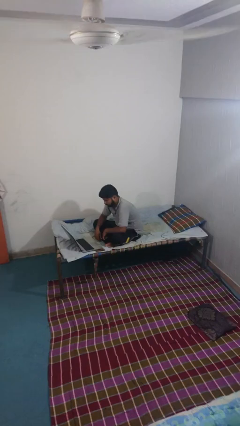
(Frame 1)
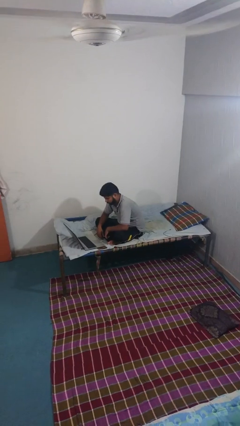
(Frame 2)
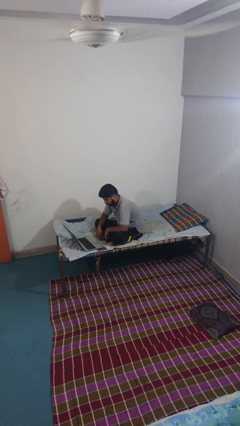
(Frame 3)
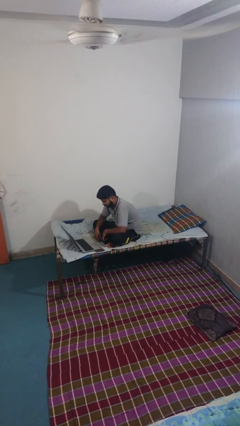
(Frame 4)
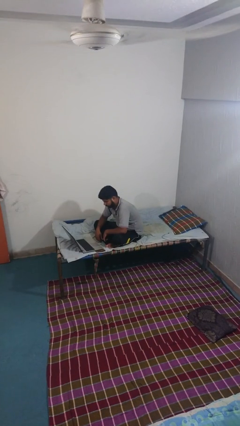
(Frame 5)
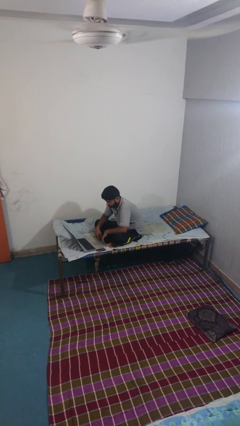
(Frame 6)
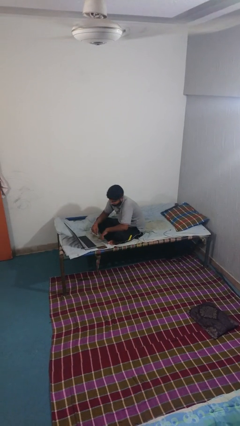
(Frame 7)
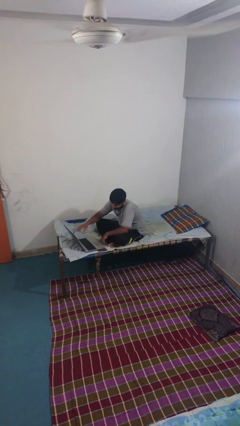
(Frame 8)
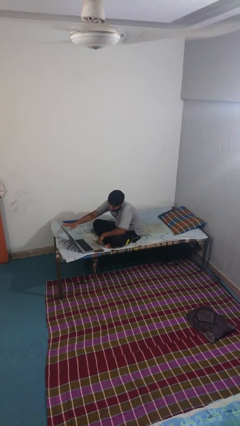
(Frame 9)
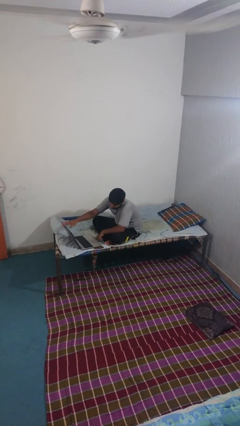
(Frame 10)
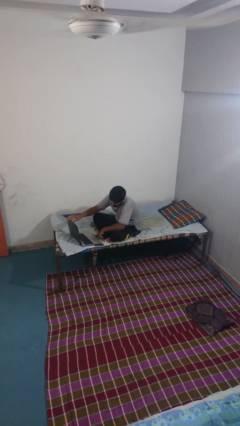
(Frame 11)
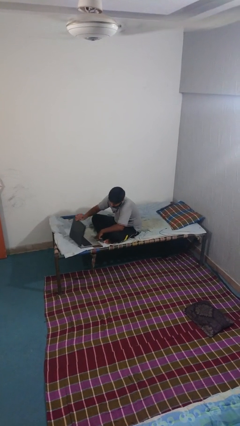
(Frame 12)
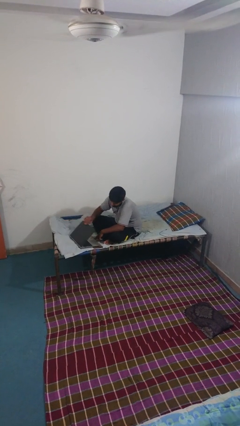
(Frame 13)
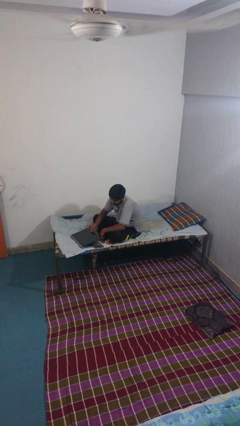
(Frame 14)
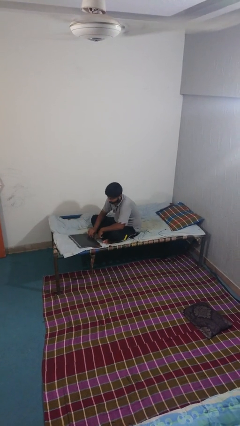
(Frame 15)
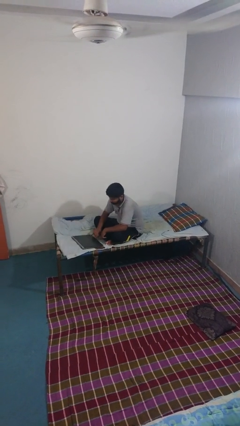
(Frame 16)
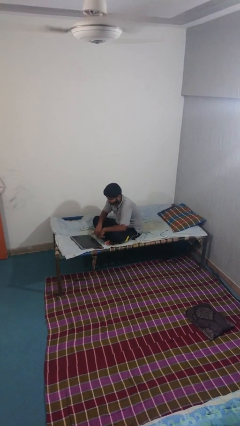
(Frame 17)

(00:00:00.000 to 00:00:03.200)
person closes laptop

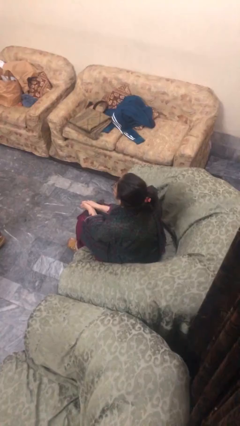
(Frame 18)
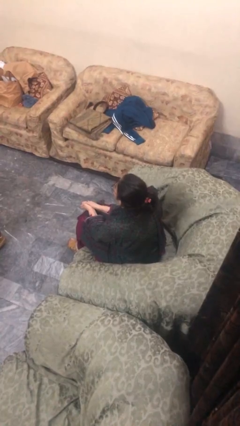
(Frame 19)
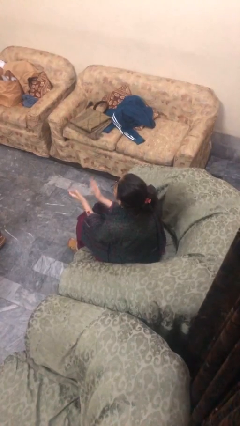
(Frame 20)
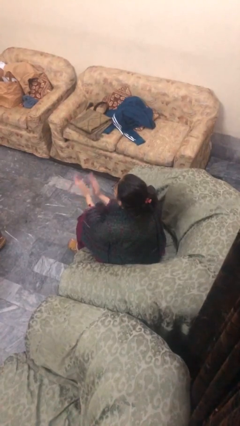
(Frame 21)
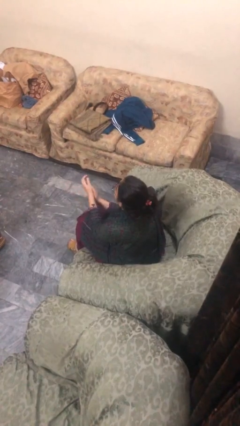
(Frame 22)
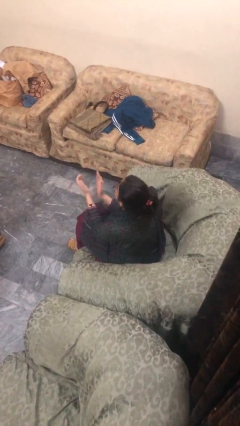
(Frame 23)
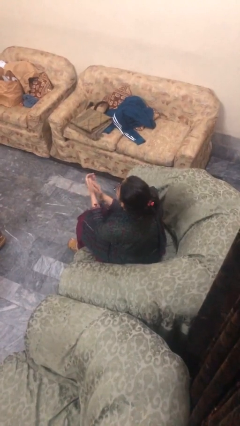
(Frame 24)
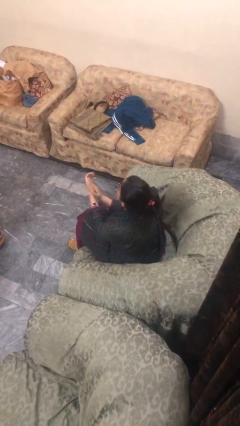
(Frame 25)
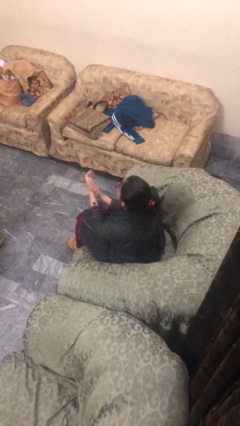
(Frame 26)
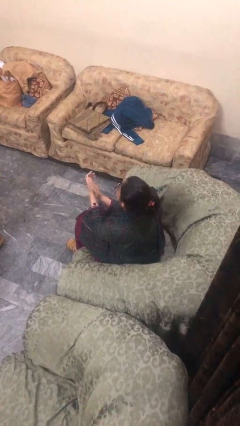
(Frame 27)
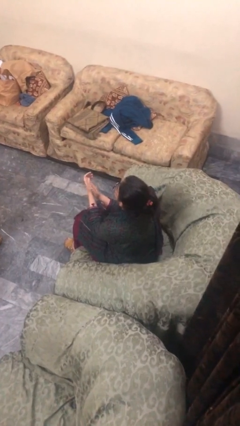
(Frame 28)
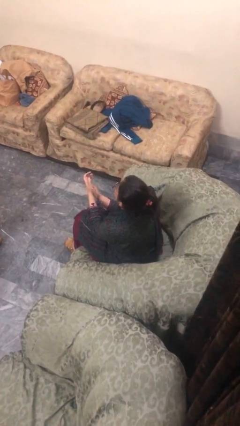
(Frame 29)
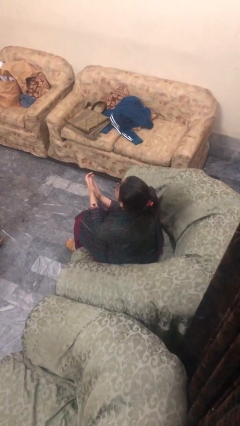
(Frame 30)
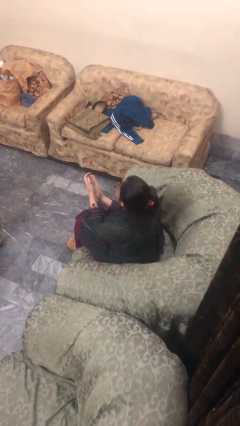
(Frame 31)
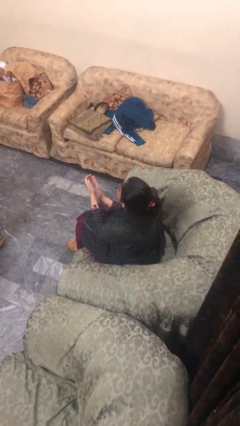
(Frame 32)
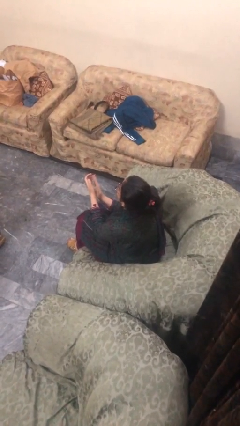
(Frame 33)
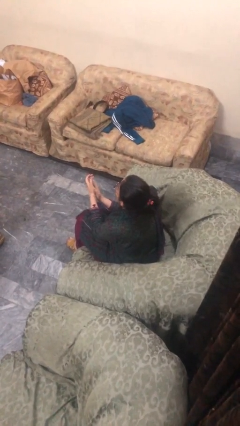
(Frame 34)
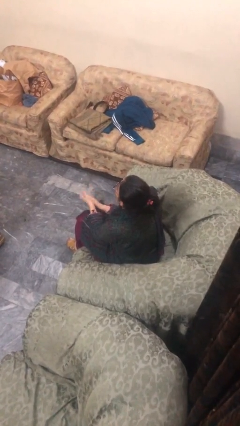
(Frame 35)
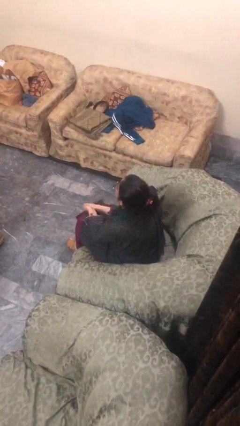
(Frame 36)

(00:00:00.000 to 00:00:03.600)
person claps hands

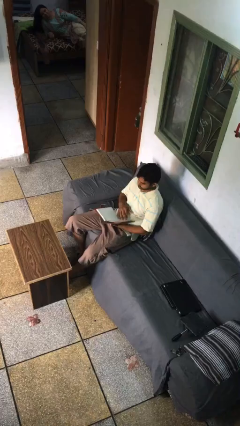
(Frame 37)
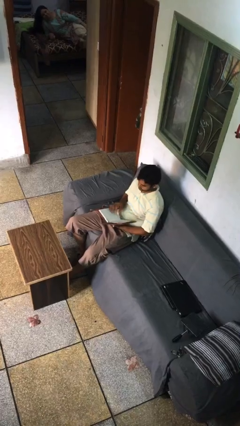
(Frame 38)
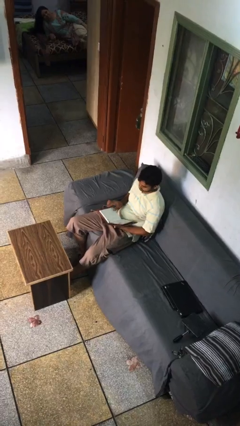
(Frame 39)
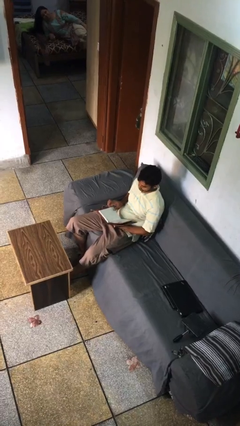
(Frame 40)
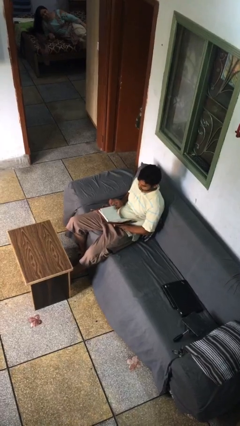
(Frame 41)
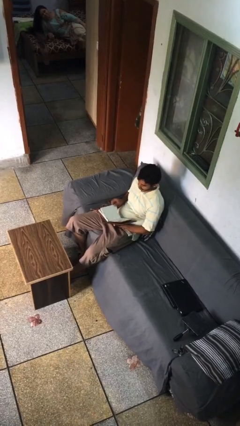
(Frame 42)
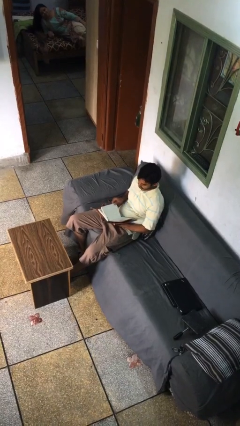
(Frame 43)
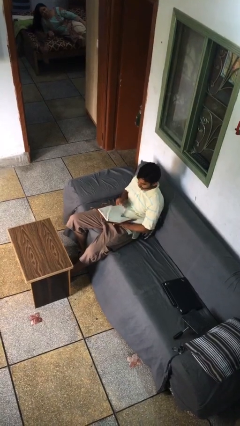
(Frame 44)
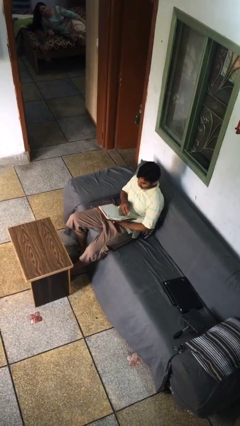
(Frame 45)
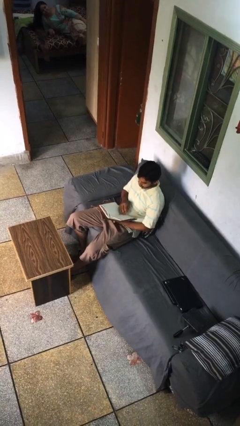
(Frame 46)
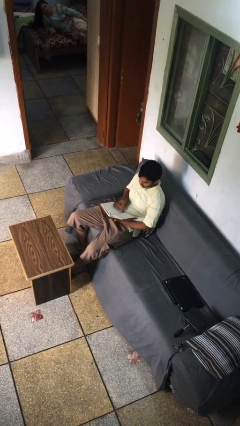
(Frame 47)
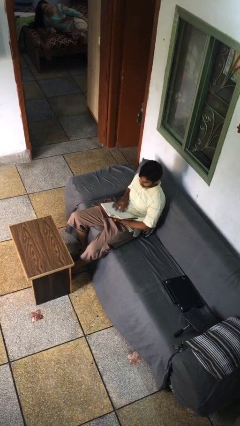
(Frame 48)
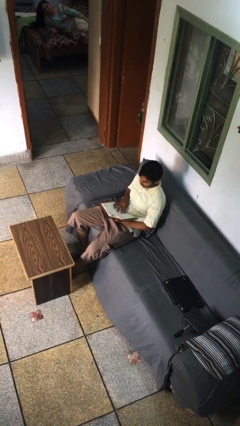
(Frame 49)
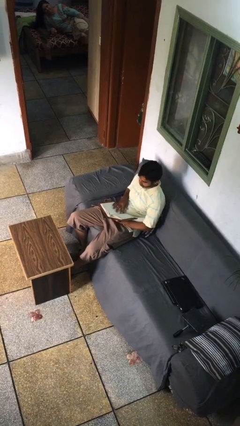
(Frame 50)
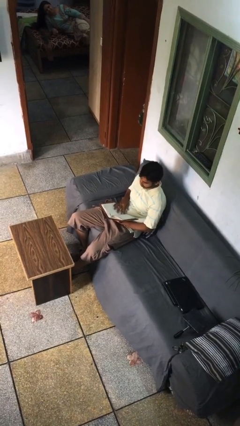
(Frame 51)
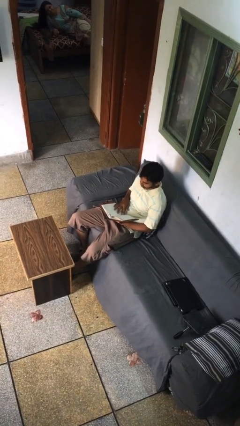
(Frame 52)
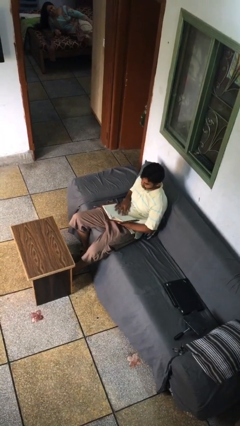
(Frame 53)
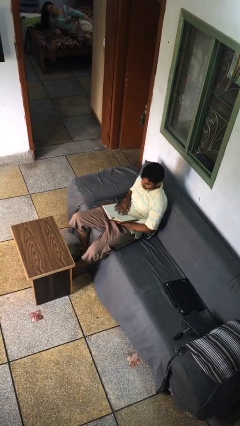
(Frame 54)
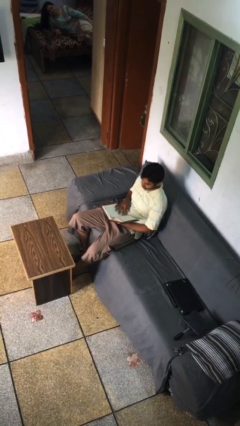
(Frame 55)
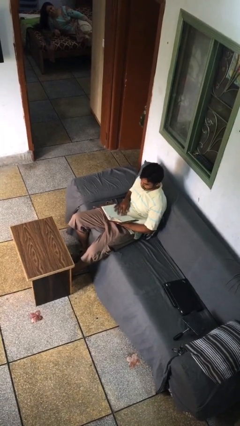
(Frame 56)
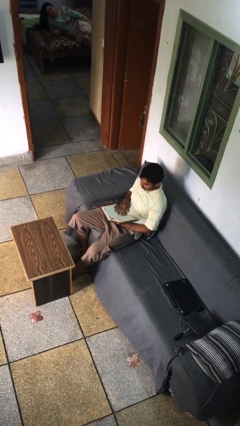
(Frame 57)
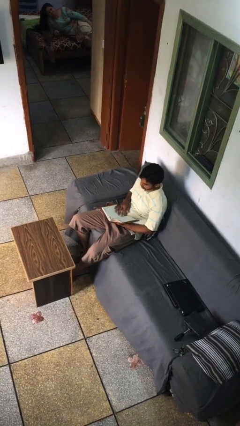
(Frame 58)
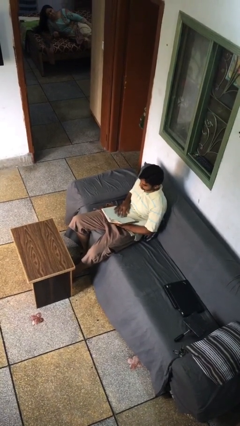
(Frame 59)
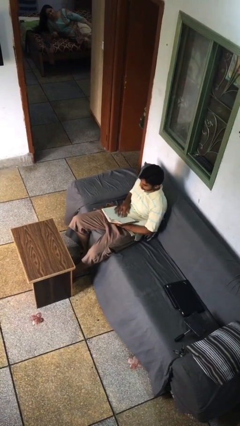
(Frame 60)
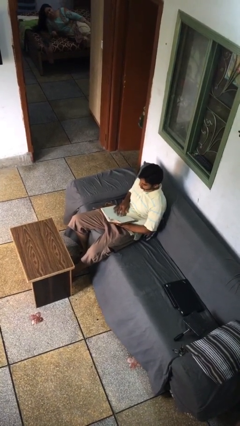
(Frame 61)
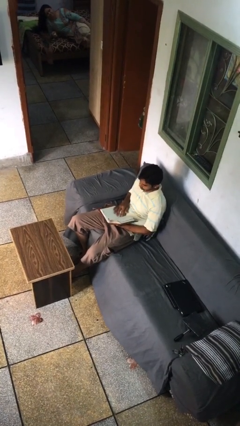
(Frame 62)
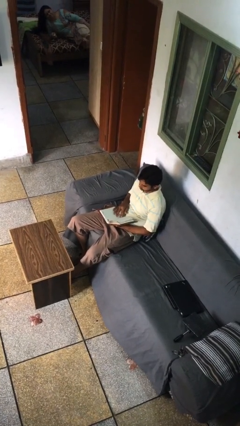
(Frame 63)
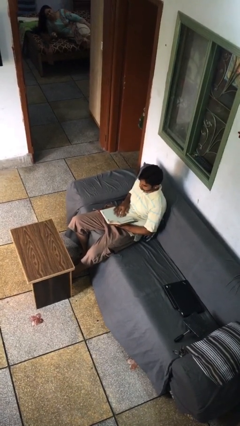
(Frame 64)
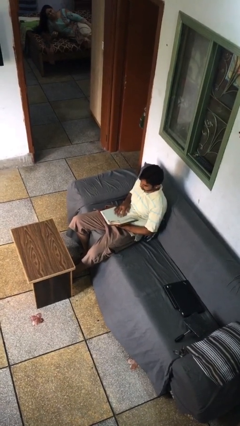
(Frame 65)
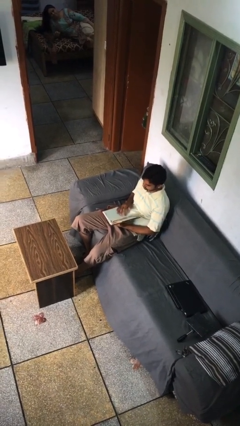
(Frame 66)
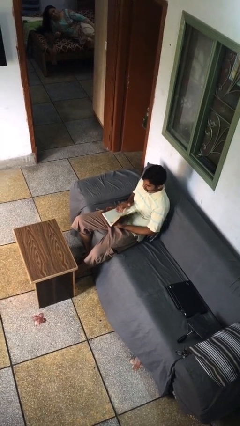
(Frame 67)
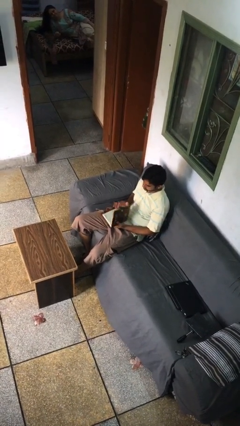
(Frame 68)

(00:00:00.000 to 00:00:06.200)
person reads document

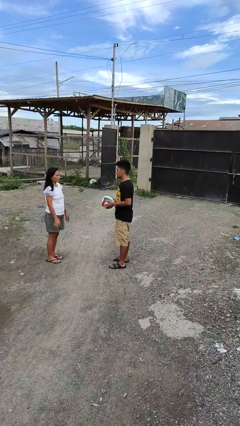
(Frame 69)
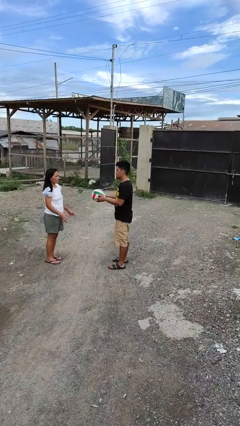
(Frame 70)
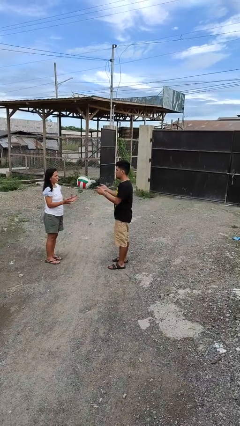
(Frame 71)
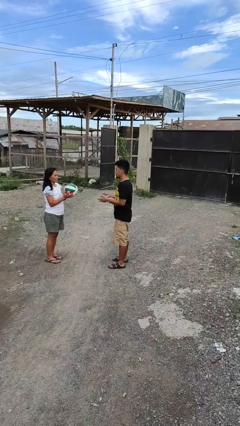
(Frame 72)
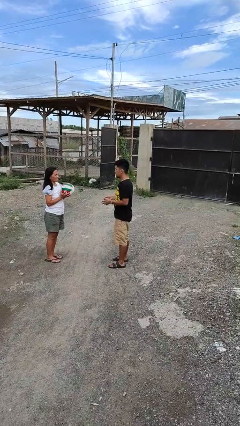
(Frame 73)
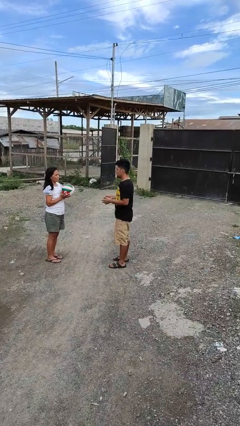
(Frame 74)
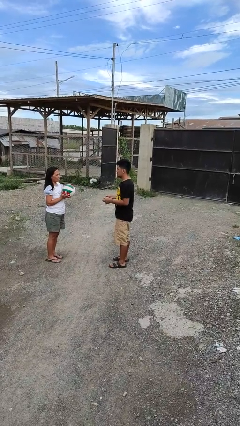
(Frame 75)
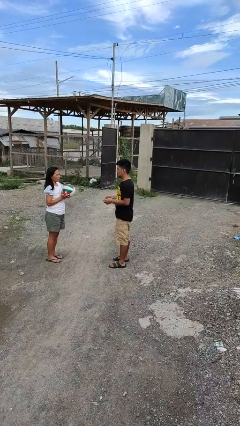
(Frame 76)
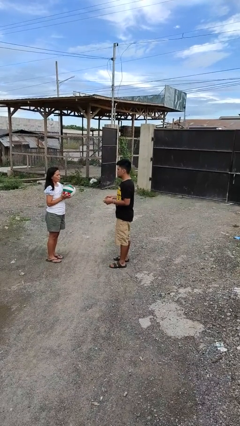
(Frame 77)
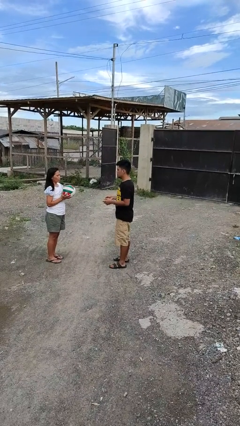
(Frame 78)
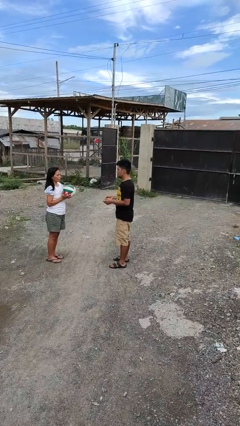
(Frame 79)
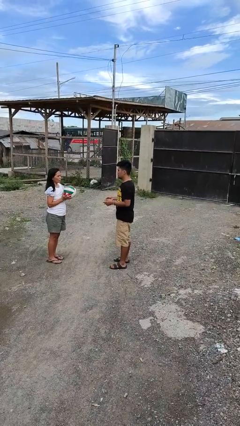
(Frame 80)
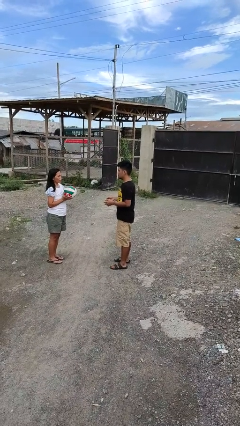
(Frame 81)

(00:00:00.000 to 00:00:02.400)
person throws object to person

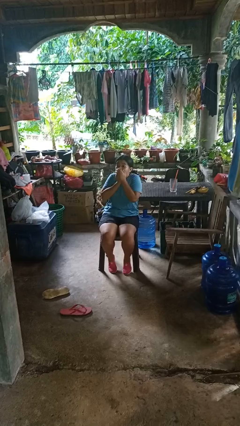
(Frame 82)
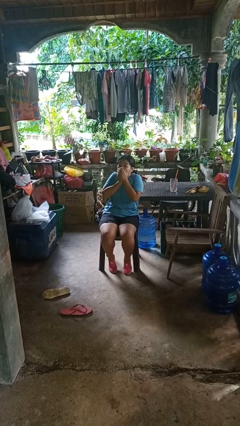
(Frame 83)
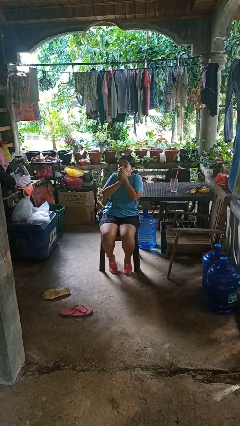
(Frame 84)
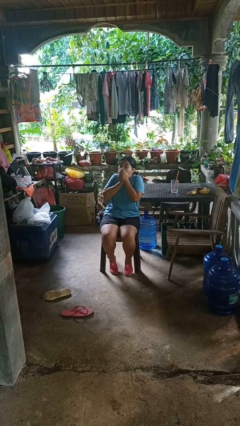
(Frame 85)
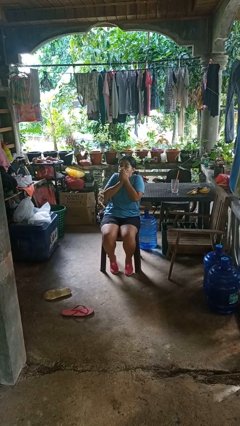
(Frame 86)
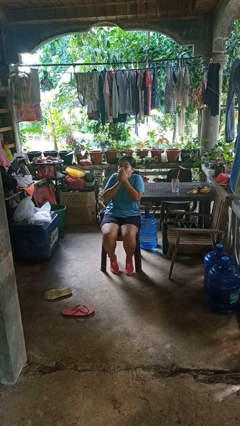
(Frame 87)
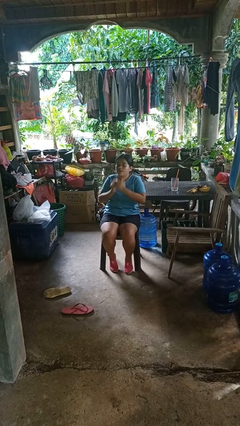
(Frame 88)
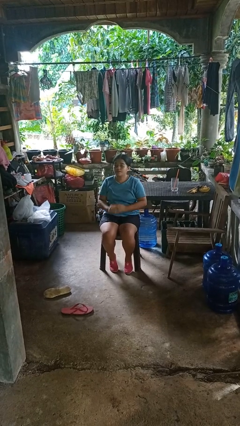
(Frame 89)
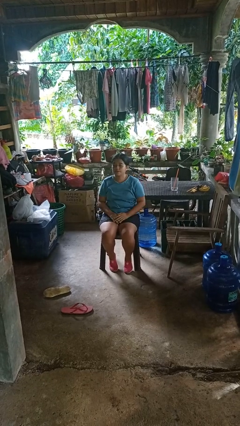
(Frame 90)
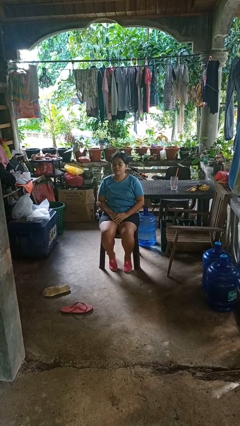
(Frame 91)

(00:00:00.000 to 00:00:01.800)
person covers face with hands

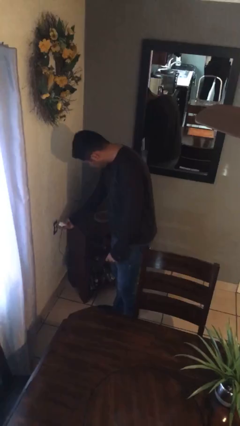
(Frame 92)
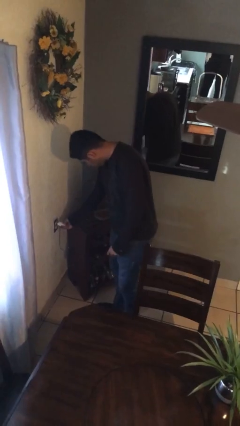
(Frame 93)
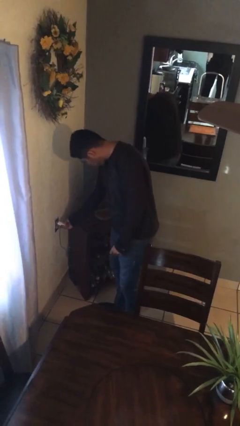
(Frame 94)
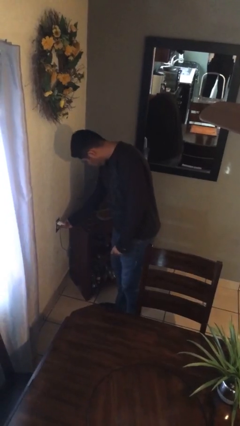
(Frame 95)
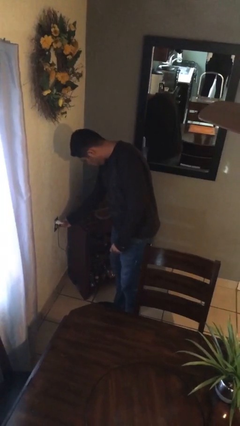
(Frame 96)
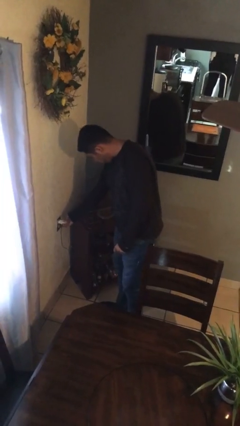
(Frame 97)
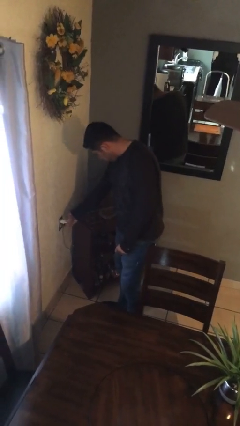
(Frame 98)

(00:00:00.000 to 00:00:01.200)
person pushes wheeled trashcan
